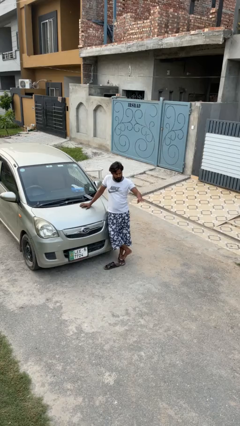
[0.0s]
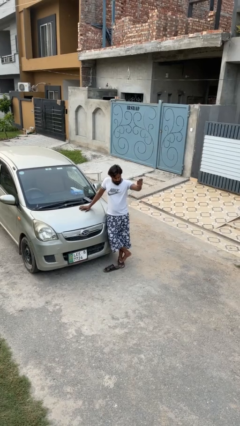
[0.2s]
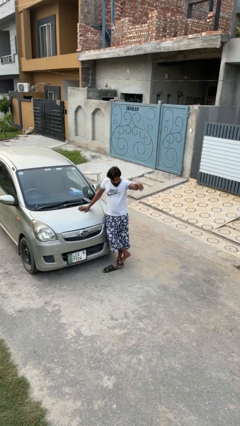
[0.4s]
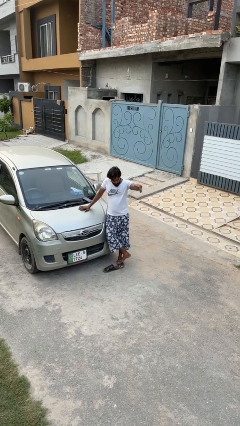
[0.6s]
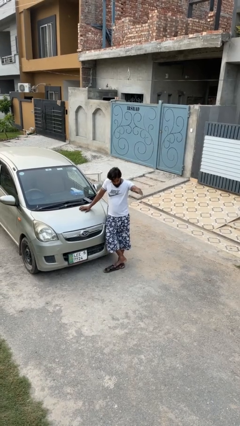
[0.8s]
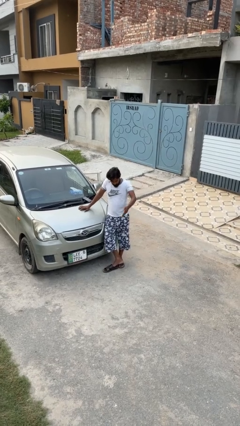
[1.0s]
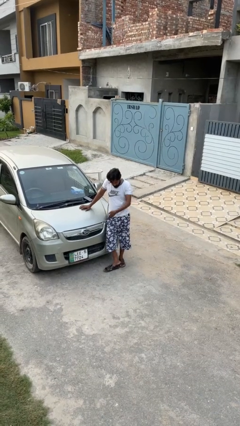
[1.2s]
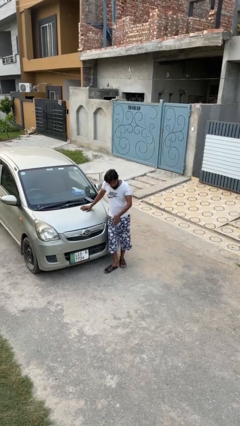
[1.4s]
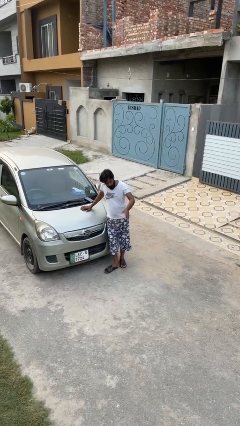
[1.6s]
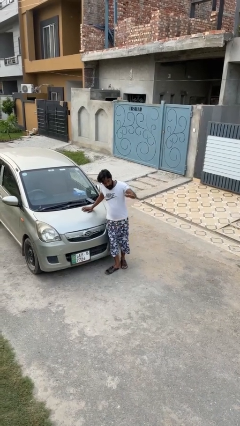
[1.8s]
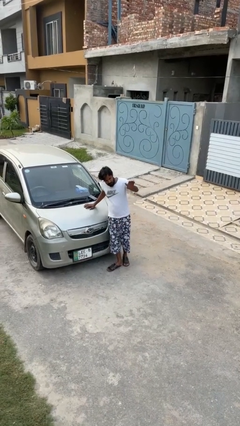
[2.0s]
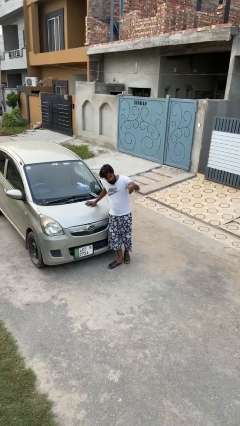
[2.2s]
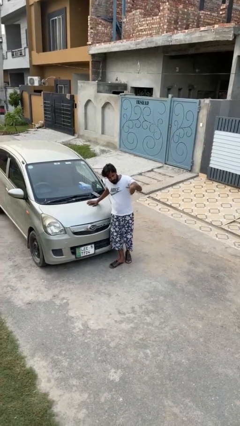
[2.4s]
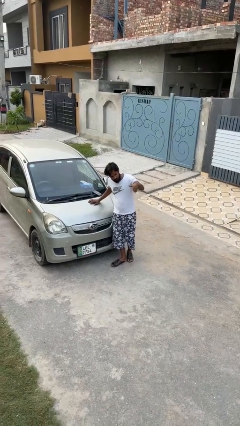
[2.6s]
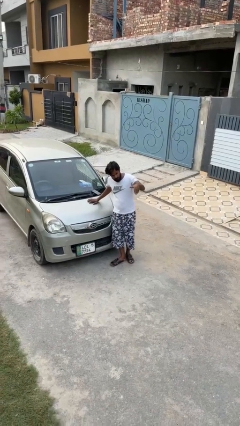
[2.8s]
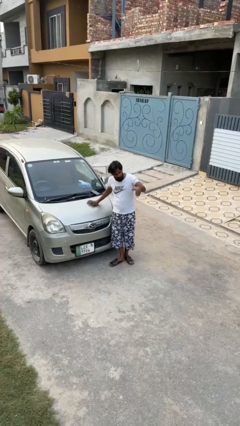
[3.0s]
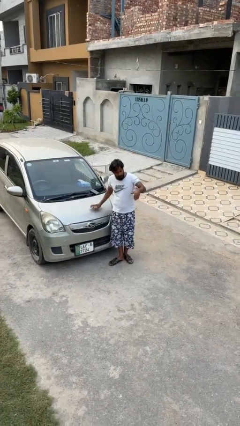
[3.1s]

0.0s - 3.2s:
person gestures come here

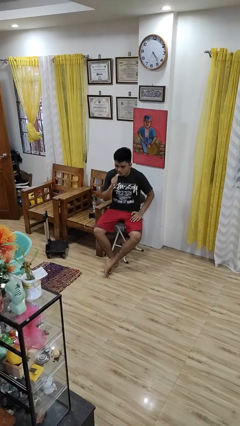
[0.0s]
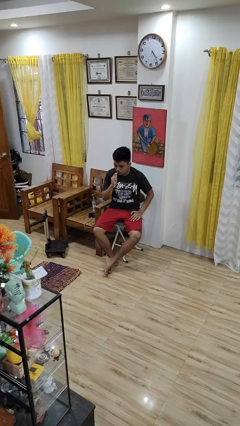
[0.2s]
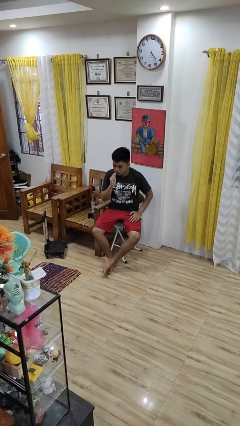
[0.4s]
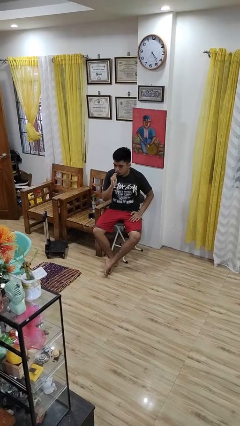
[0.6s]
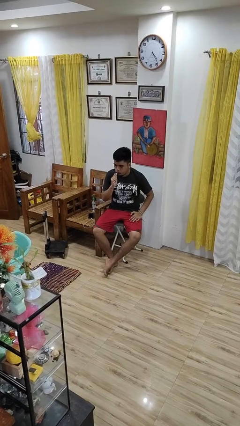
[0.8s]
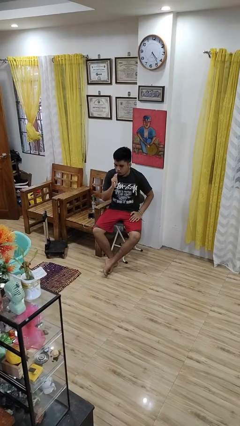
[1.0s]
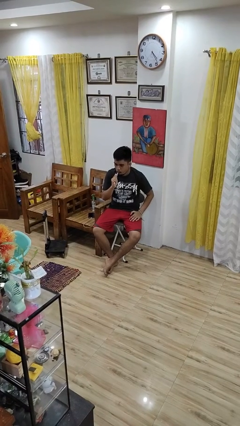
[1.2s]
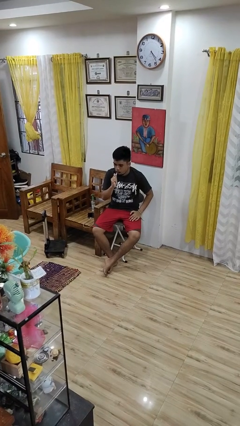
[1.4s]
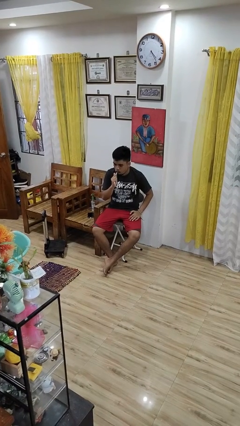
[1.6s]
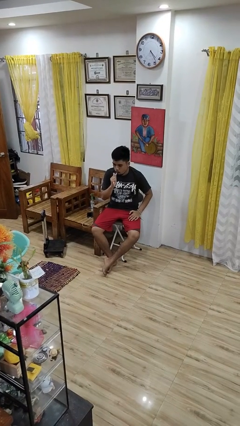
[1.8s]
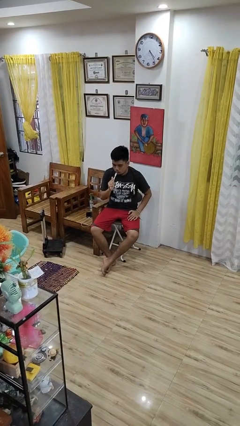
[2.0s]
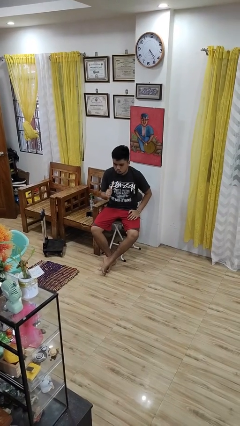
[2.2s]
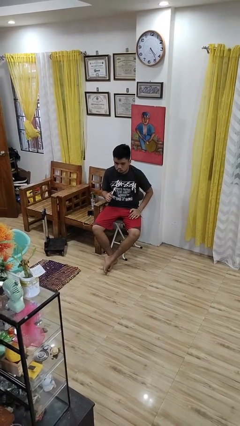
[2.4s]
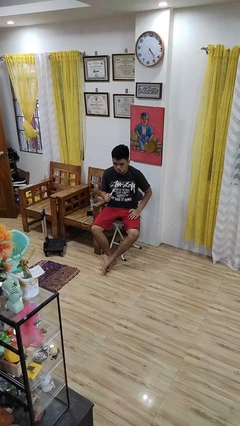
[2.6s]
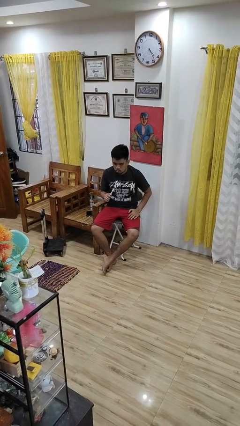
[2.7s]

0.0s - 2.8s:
person brushes teeth

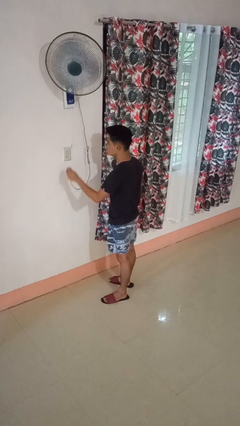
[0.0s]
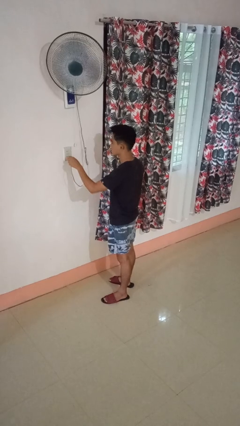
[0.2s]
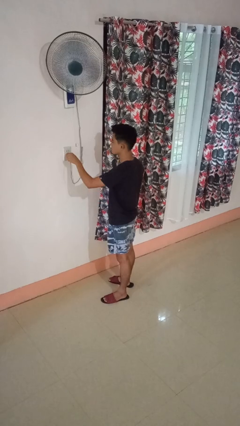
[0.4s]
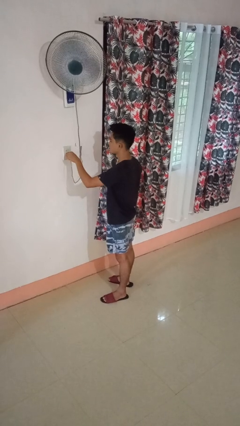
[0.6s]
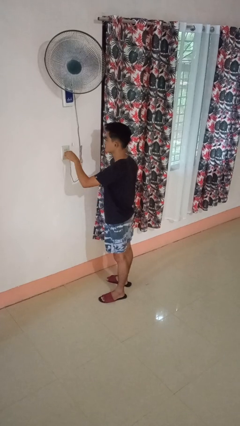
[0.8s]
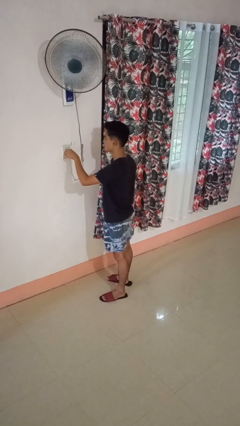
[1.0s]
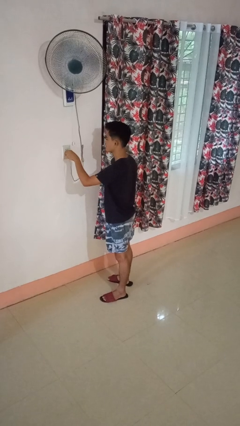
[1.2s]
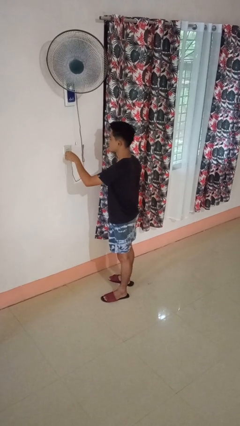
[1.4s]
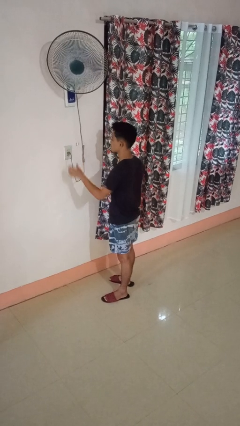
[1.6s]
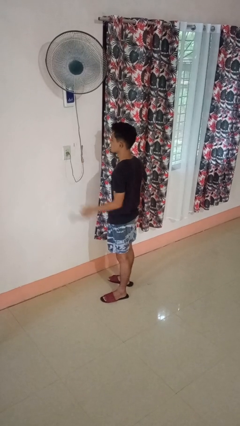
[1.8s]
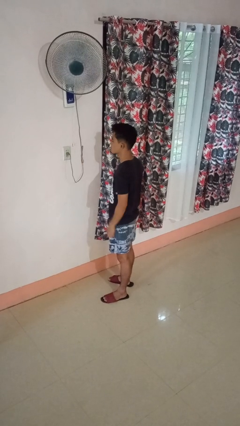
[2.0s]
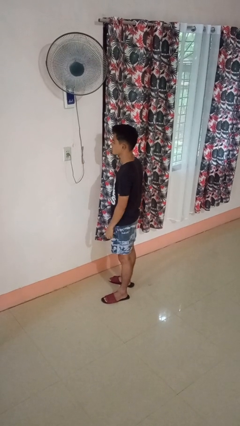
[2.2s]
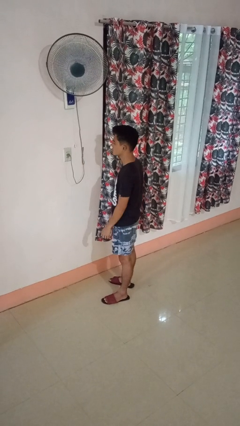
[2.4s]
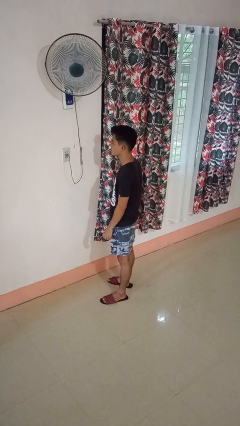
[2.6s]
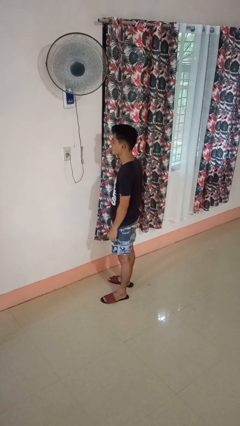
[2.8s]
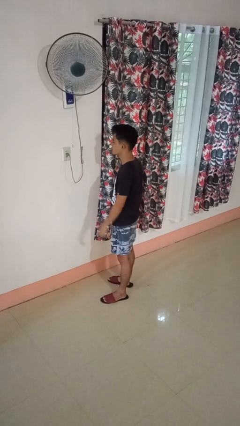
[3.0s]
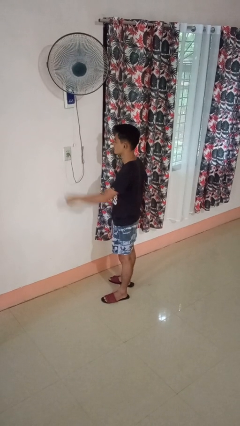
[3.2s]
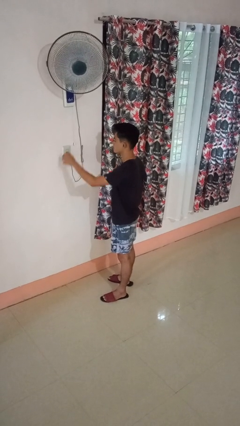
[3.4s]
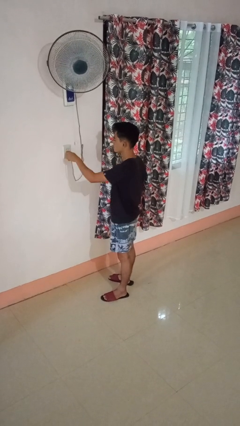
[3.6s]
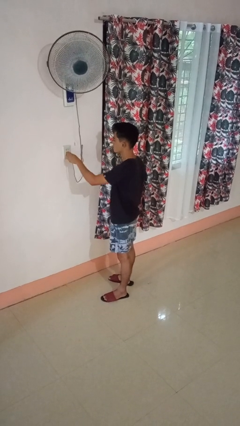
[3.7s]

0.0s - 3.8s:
person plugs into electrical socket

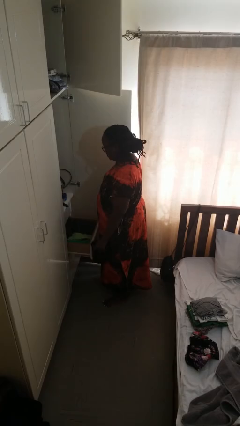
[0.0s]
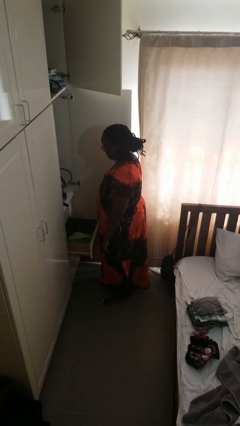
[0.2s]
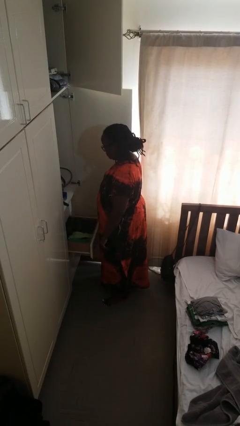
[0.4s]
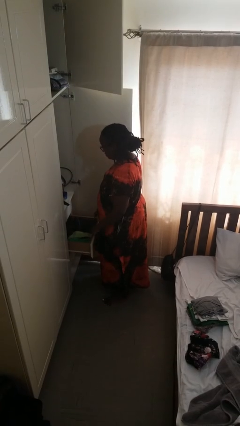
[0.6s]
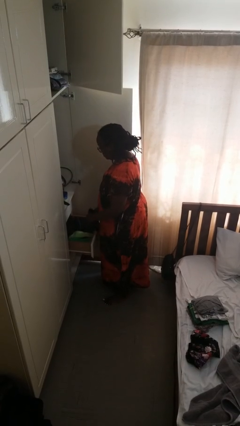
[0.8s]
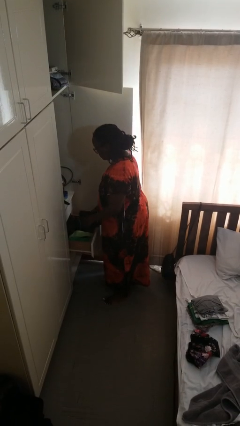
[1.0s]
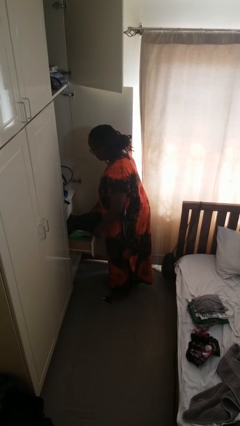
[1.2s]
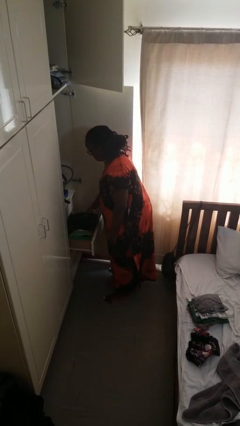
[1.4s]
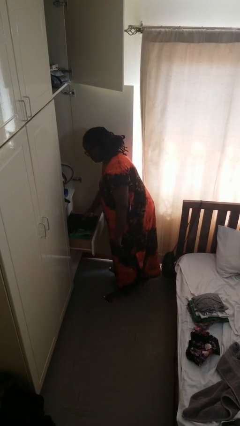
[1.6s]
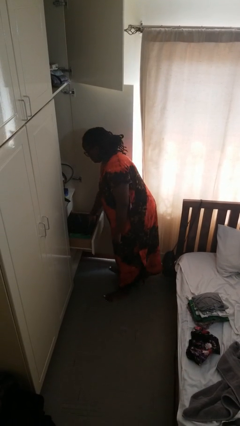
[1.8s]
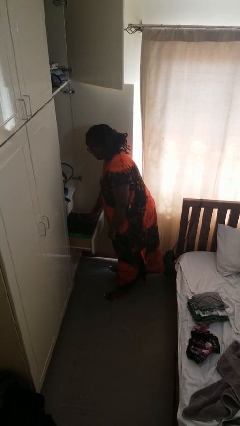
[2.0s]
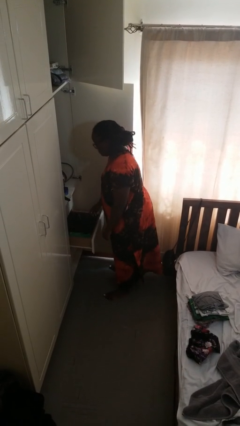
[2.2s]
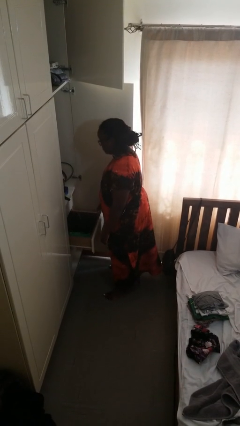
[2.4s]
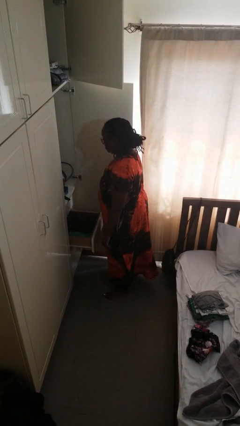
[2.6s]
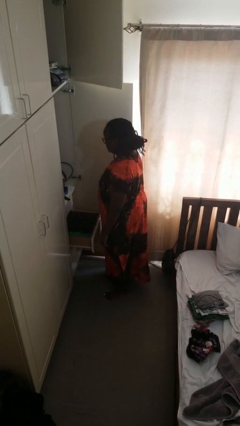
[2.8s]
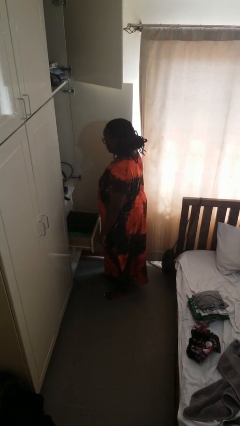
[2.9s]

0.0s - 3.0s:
person puts clothes into dresser

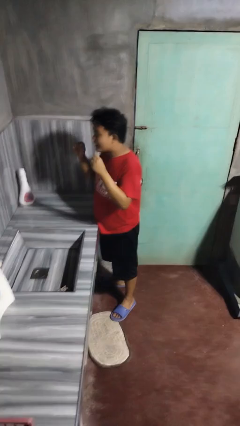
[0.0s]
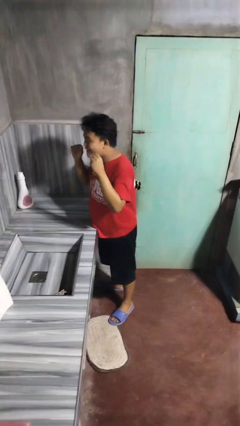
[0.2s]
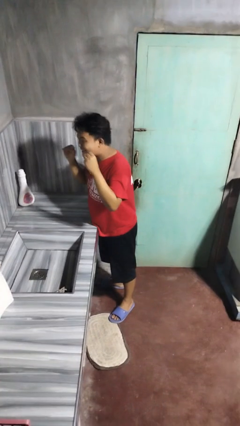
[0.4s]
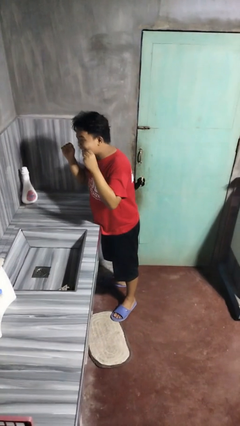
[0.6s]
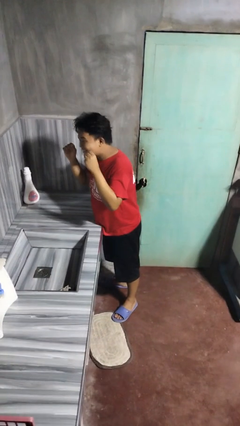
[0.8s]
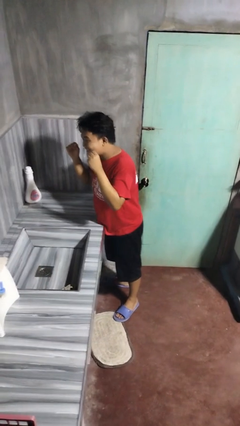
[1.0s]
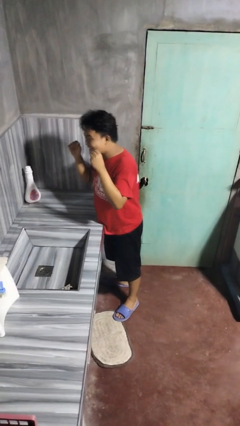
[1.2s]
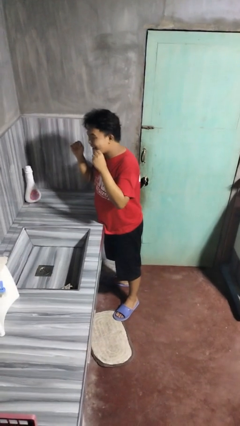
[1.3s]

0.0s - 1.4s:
person flosses

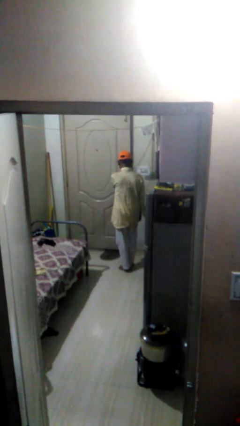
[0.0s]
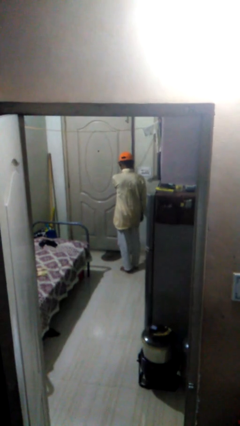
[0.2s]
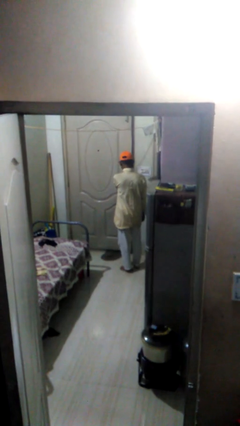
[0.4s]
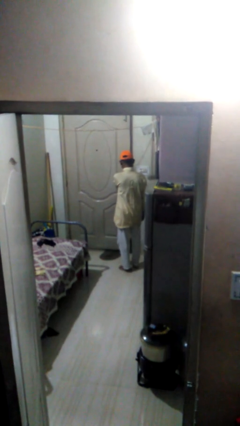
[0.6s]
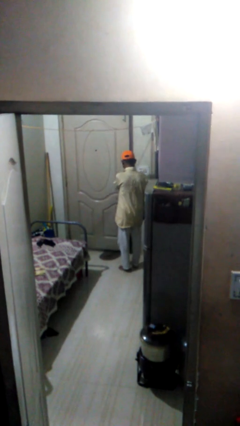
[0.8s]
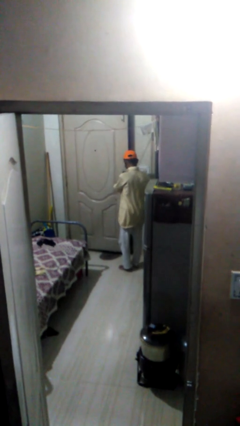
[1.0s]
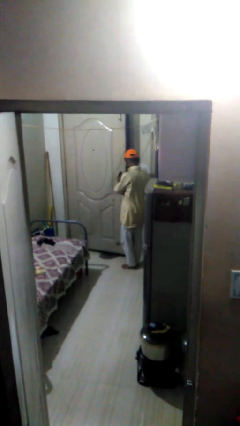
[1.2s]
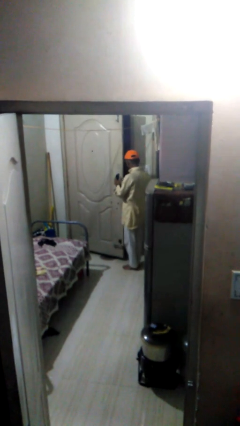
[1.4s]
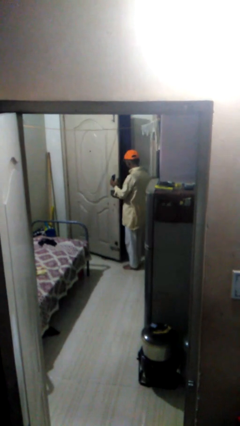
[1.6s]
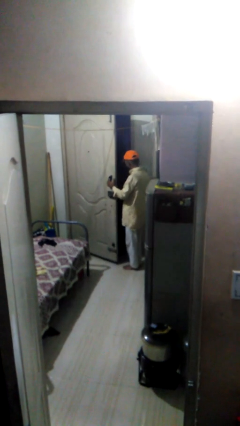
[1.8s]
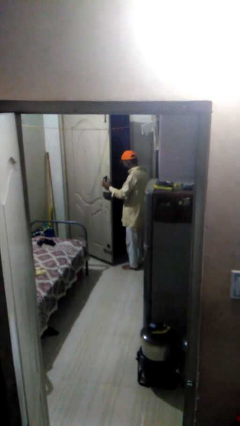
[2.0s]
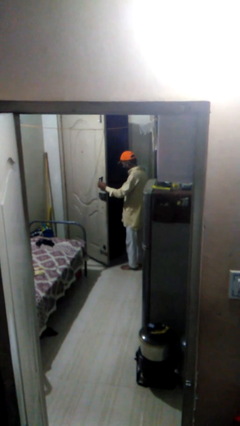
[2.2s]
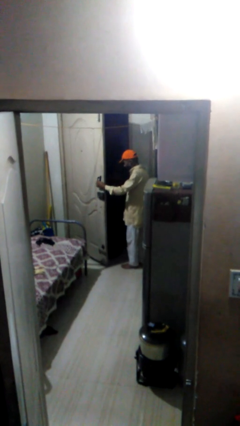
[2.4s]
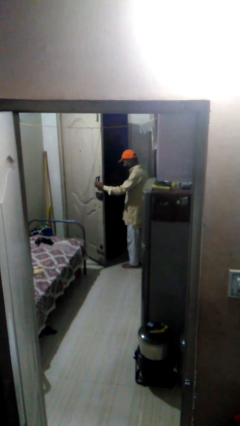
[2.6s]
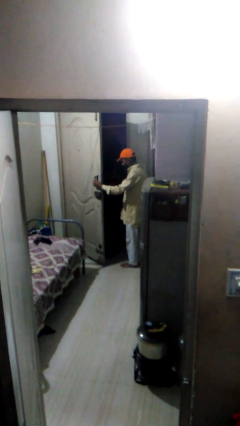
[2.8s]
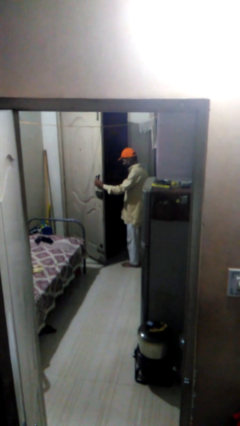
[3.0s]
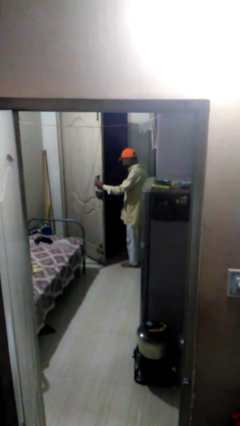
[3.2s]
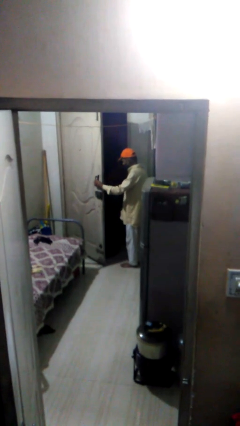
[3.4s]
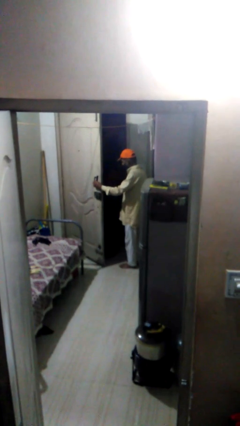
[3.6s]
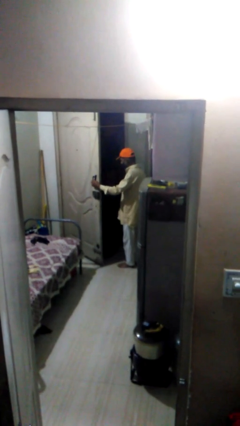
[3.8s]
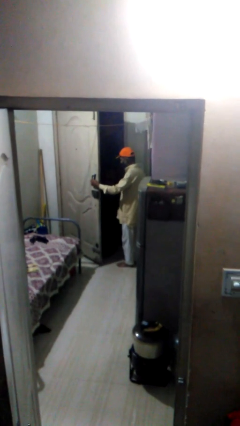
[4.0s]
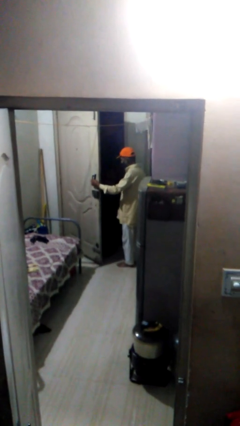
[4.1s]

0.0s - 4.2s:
person opens facility door
